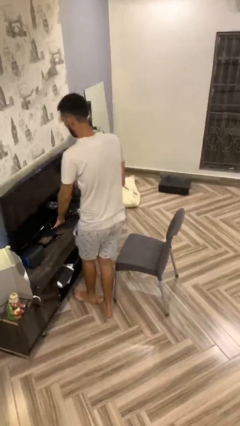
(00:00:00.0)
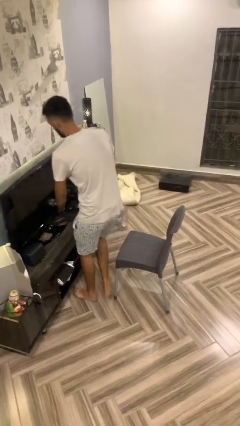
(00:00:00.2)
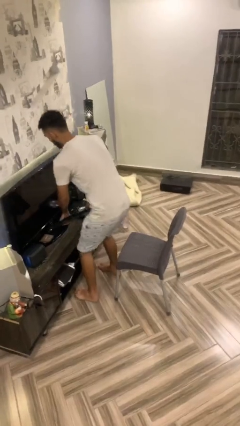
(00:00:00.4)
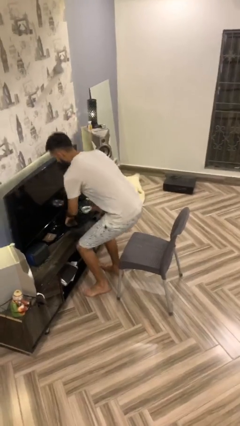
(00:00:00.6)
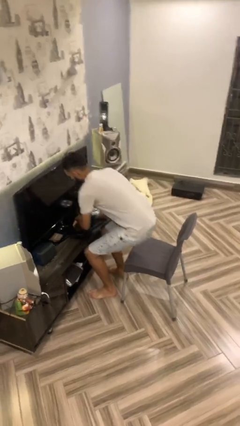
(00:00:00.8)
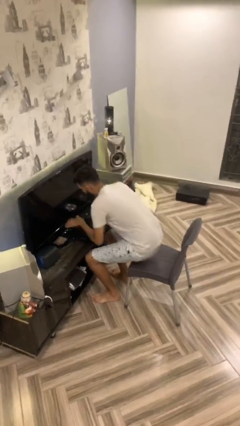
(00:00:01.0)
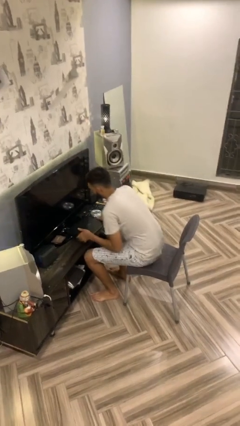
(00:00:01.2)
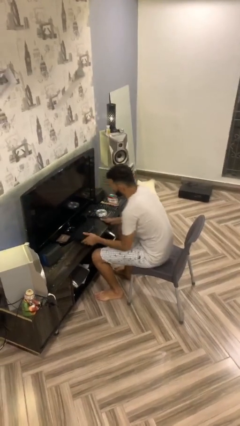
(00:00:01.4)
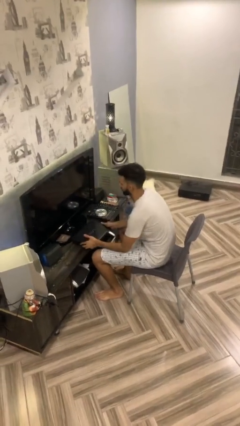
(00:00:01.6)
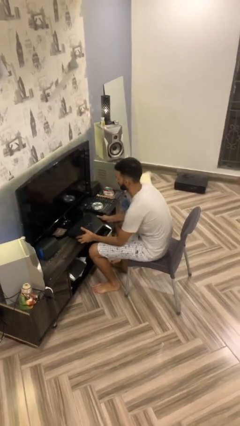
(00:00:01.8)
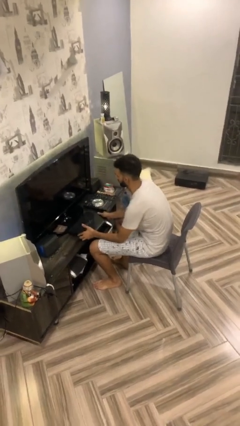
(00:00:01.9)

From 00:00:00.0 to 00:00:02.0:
person sits down

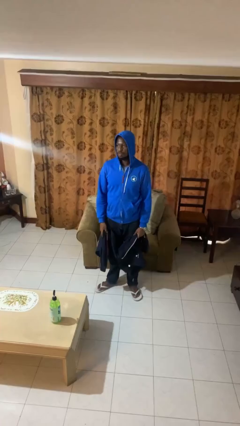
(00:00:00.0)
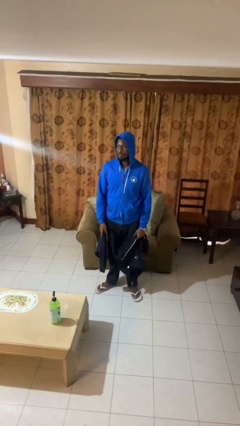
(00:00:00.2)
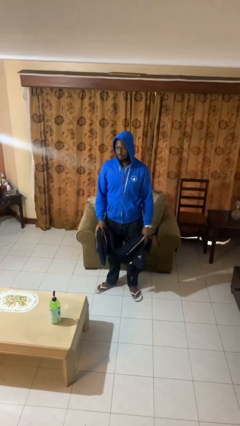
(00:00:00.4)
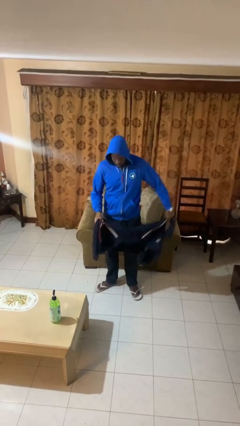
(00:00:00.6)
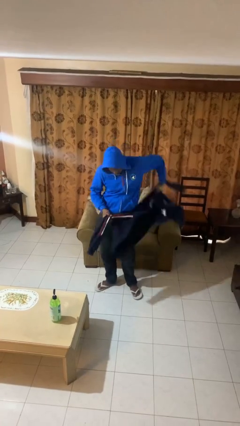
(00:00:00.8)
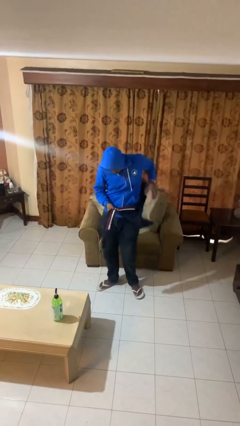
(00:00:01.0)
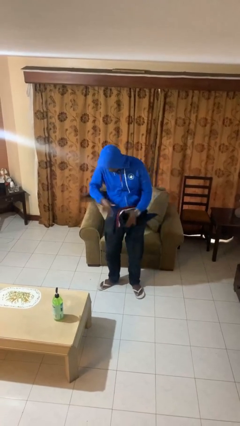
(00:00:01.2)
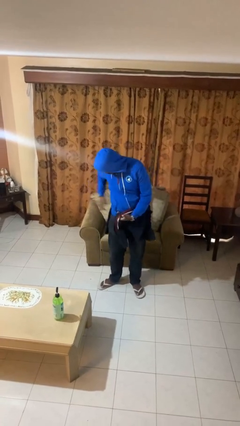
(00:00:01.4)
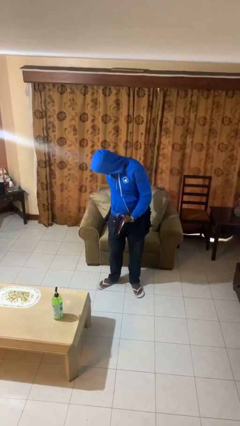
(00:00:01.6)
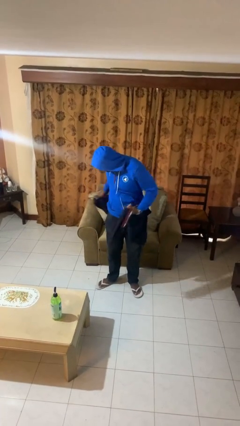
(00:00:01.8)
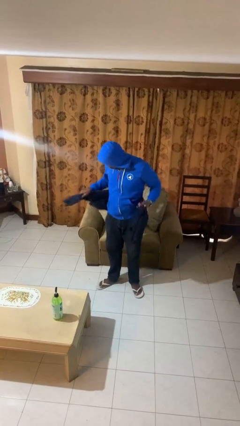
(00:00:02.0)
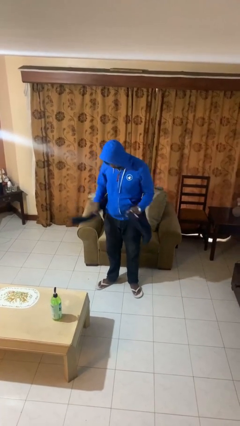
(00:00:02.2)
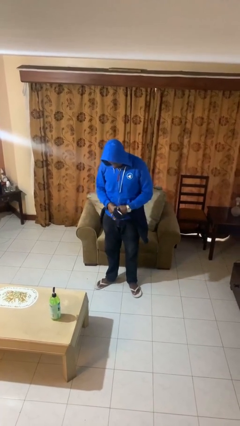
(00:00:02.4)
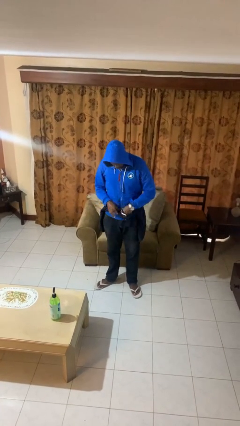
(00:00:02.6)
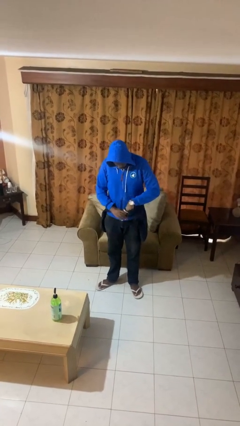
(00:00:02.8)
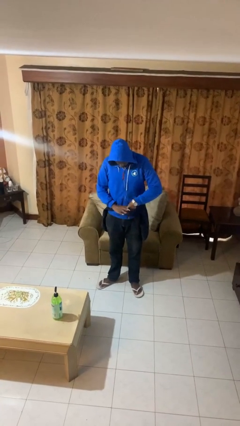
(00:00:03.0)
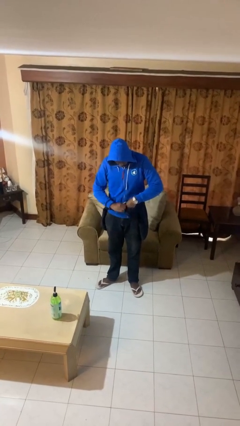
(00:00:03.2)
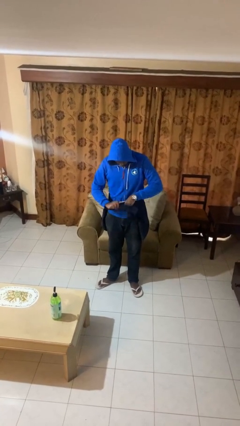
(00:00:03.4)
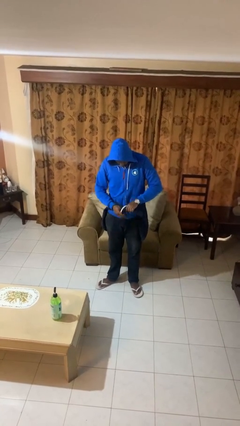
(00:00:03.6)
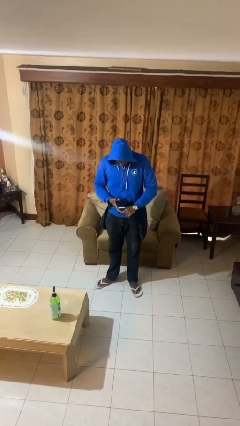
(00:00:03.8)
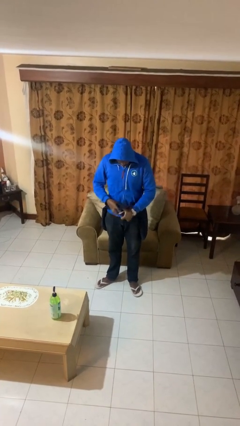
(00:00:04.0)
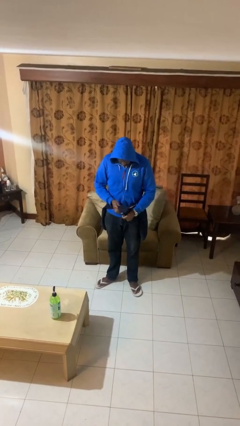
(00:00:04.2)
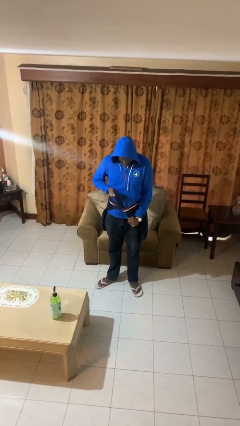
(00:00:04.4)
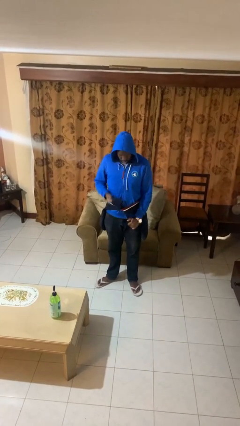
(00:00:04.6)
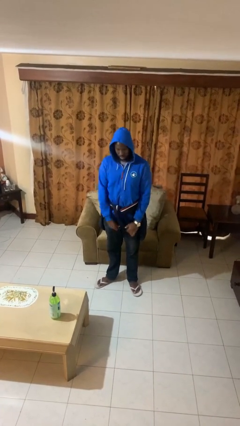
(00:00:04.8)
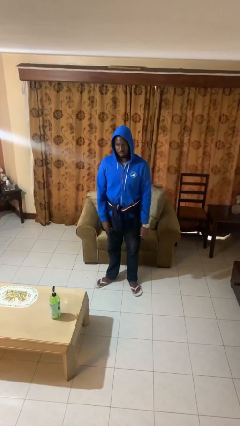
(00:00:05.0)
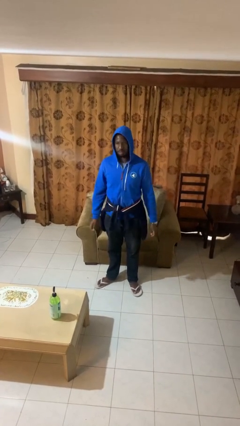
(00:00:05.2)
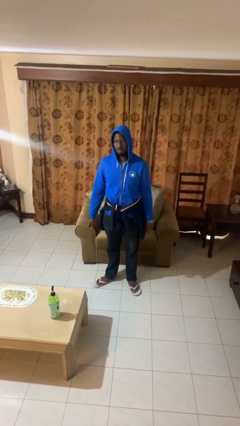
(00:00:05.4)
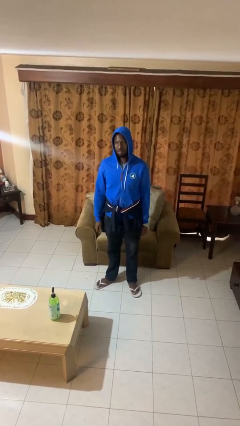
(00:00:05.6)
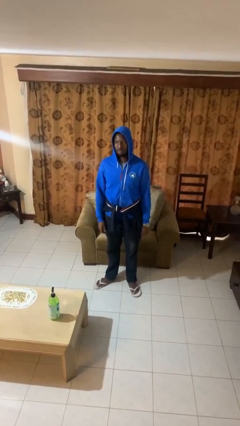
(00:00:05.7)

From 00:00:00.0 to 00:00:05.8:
person ties jacket around waist

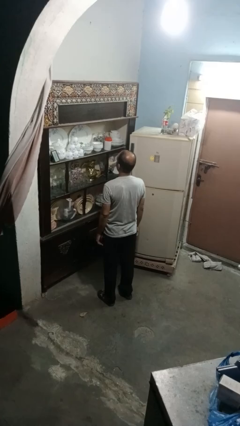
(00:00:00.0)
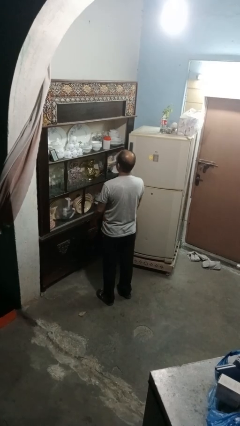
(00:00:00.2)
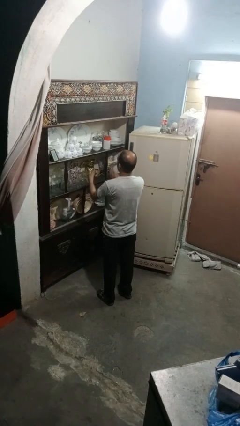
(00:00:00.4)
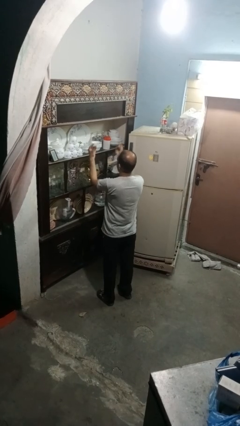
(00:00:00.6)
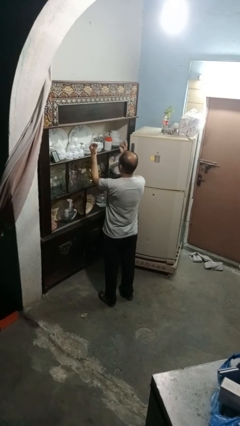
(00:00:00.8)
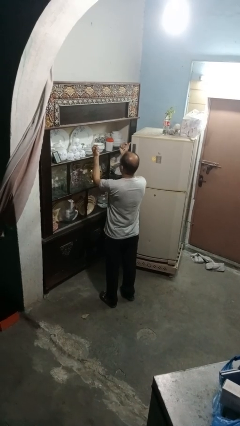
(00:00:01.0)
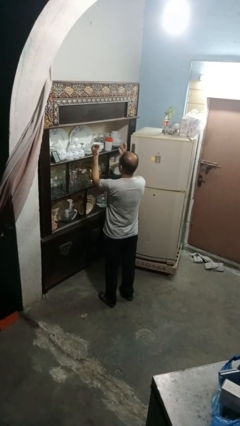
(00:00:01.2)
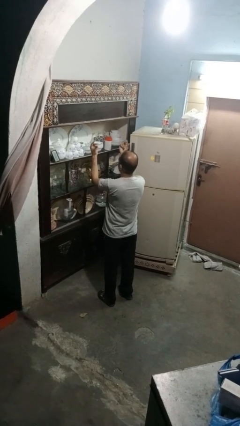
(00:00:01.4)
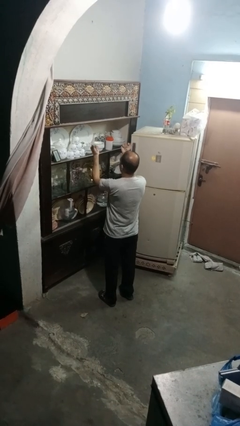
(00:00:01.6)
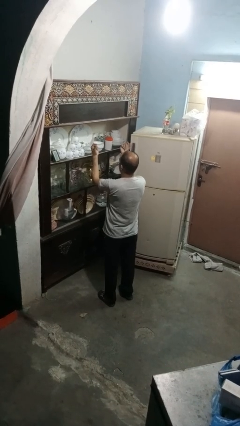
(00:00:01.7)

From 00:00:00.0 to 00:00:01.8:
person snaps fingers

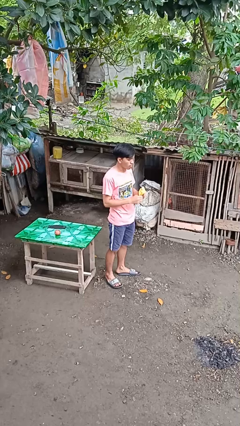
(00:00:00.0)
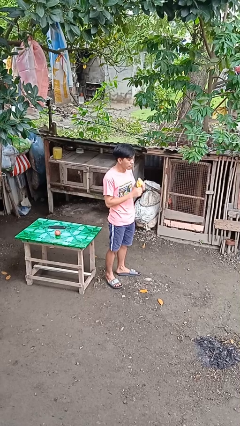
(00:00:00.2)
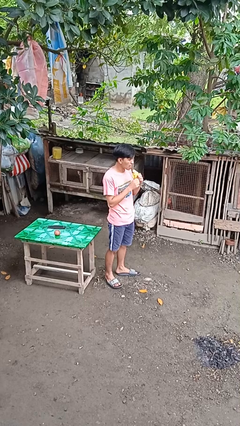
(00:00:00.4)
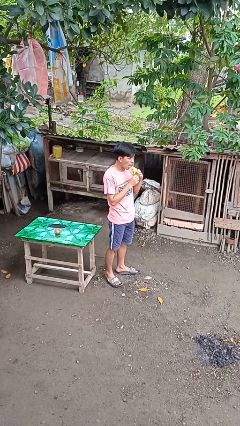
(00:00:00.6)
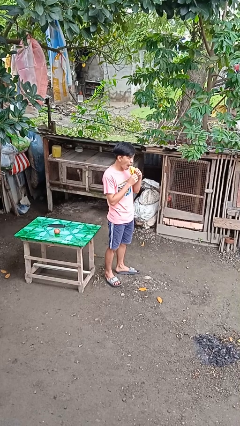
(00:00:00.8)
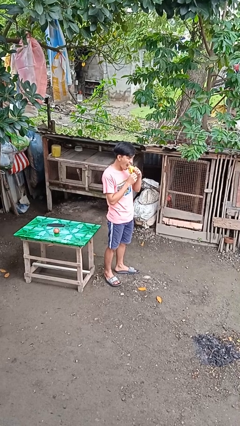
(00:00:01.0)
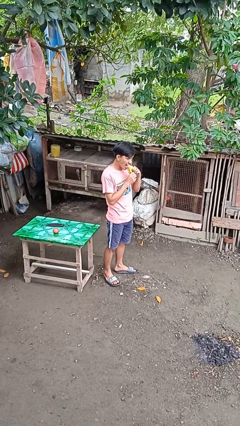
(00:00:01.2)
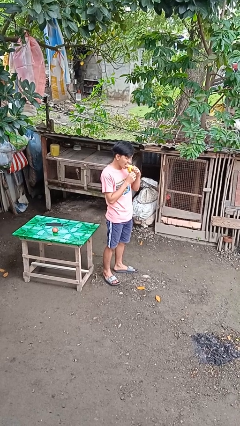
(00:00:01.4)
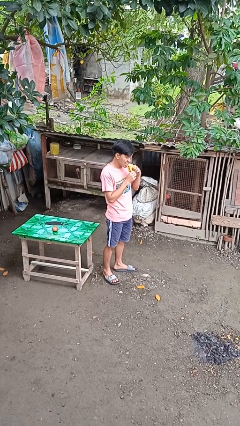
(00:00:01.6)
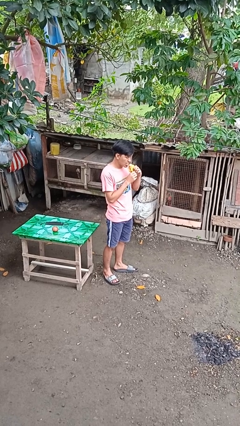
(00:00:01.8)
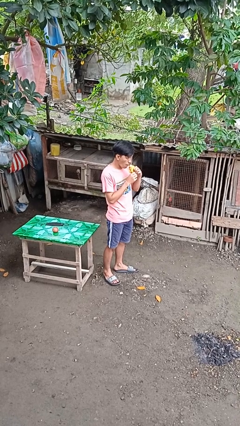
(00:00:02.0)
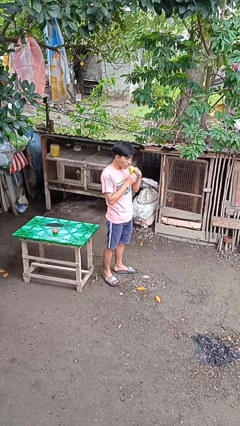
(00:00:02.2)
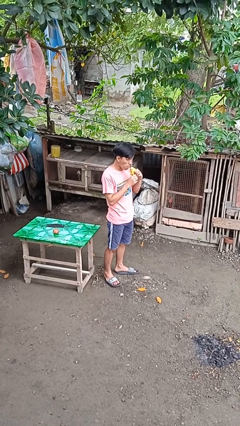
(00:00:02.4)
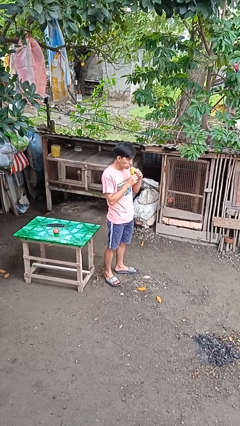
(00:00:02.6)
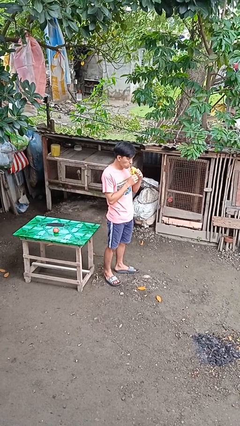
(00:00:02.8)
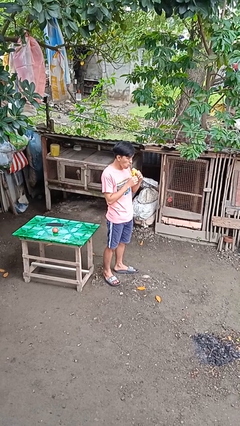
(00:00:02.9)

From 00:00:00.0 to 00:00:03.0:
person eats banana

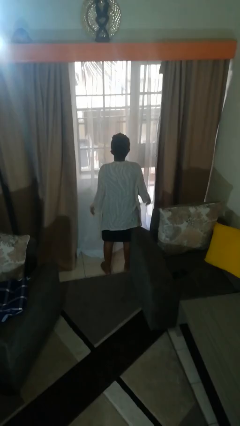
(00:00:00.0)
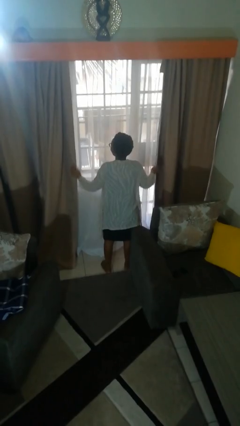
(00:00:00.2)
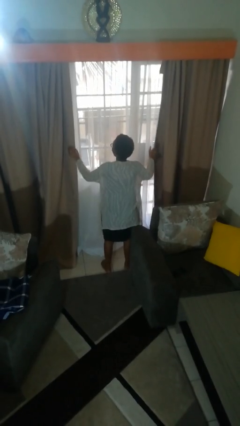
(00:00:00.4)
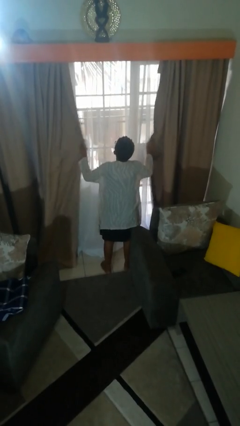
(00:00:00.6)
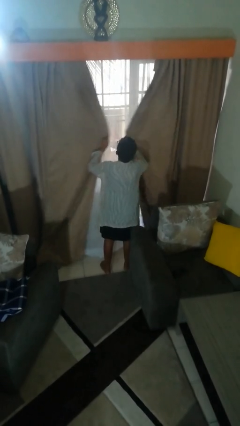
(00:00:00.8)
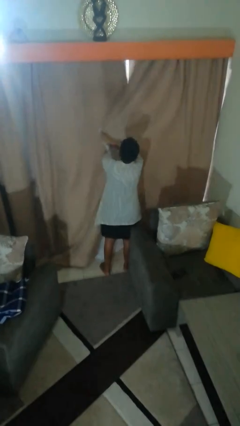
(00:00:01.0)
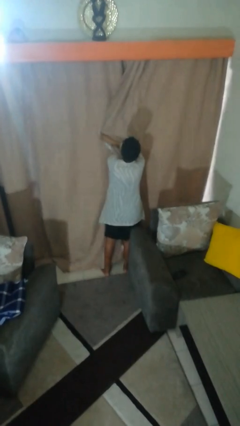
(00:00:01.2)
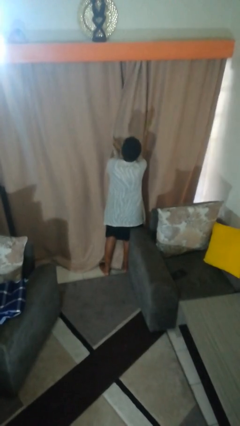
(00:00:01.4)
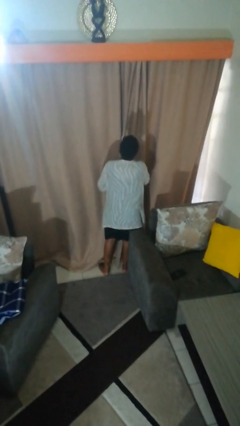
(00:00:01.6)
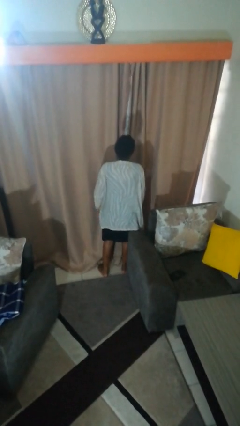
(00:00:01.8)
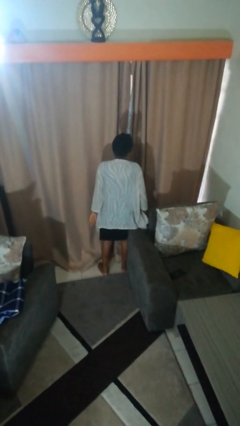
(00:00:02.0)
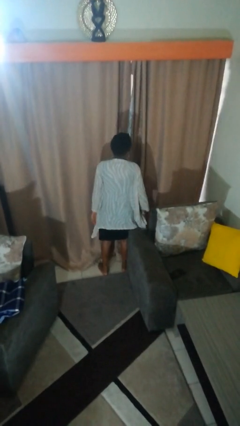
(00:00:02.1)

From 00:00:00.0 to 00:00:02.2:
person closes curtains

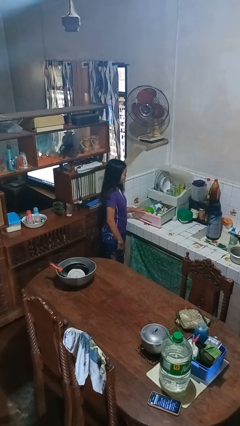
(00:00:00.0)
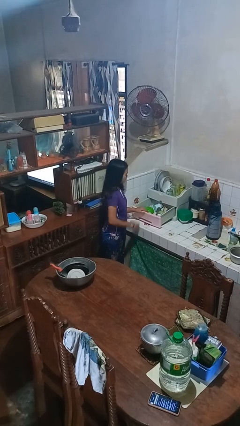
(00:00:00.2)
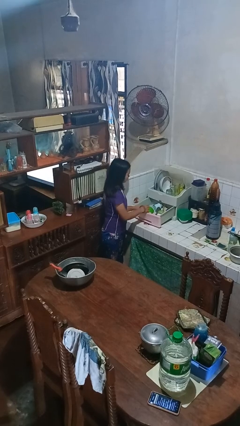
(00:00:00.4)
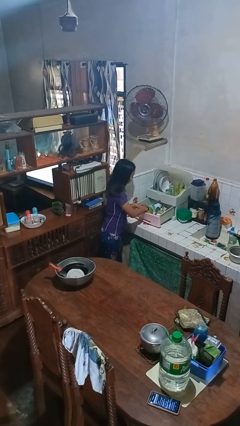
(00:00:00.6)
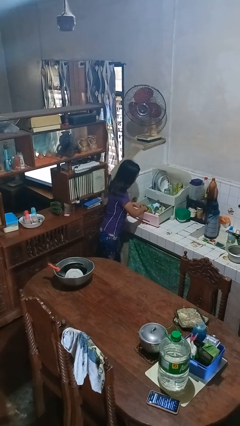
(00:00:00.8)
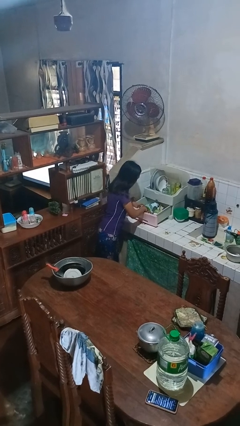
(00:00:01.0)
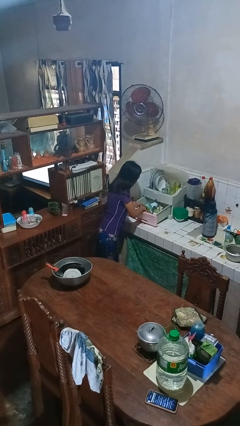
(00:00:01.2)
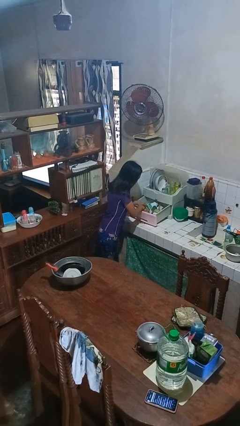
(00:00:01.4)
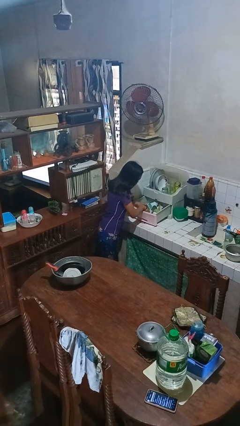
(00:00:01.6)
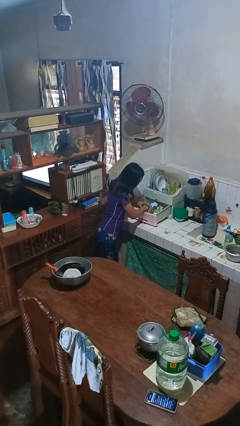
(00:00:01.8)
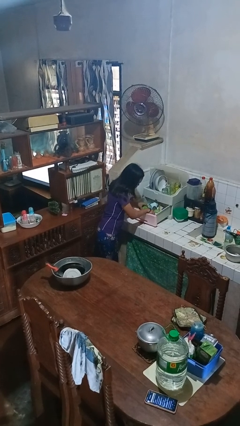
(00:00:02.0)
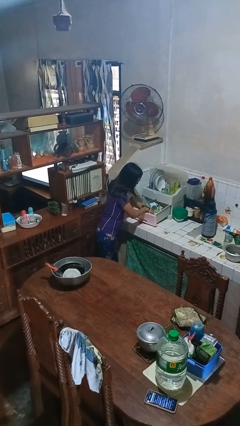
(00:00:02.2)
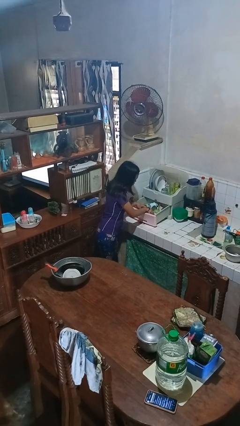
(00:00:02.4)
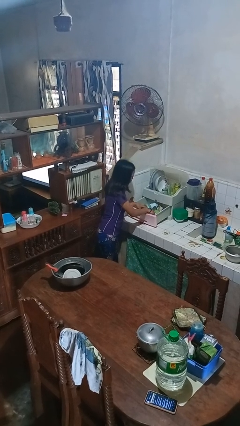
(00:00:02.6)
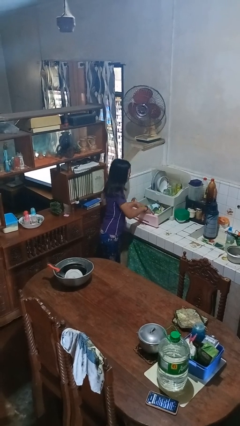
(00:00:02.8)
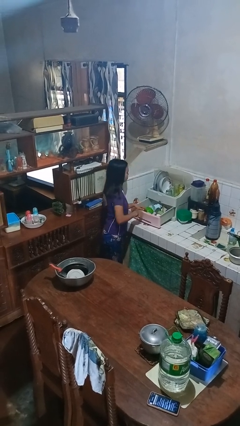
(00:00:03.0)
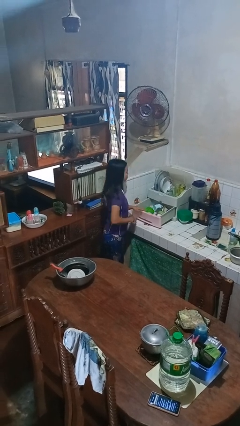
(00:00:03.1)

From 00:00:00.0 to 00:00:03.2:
person searches in kitchen drawer
